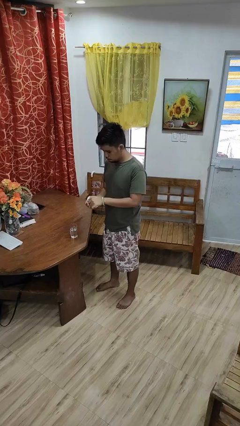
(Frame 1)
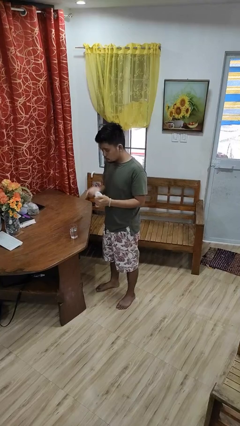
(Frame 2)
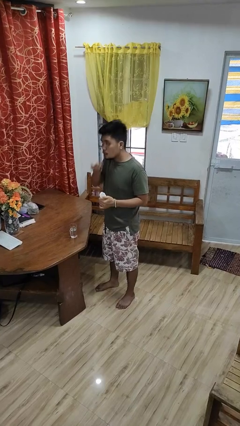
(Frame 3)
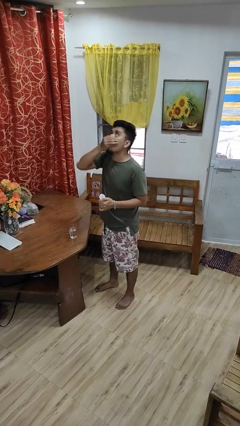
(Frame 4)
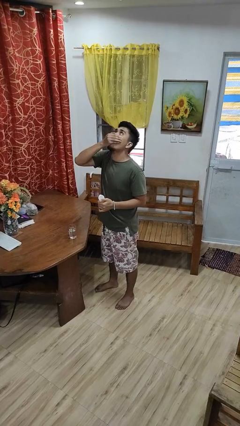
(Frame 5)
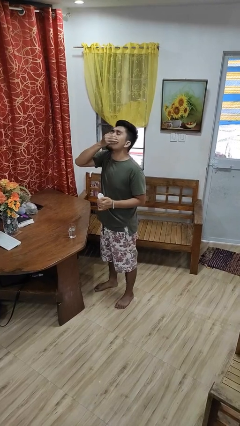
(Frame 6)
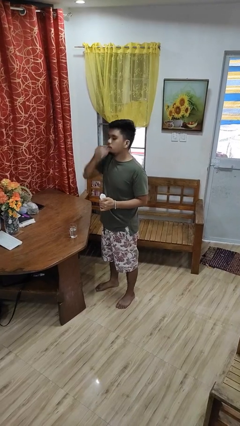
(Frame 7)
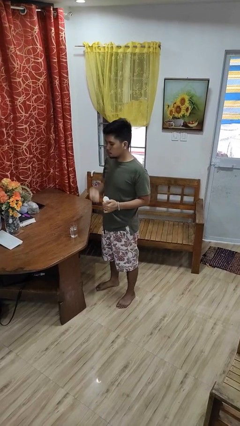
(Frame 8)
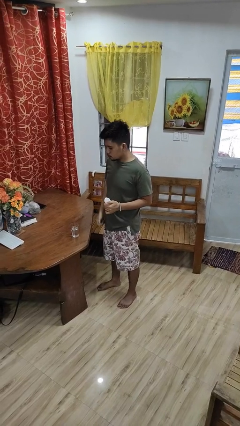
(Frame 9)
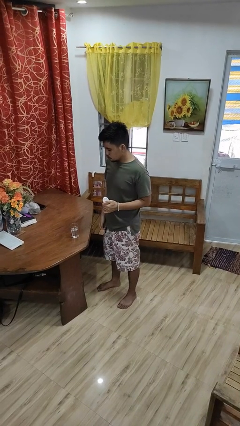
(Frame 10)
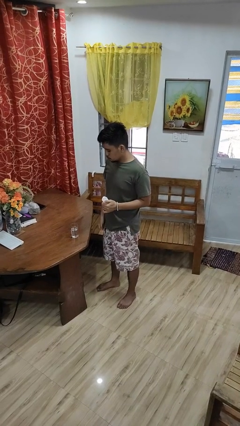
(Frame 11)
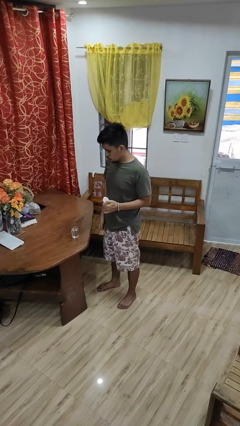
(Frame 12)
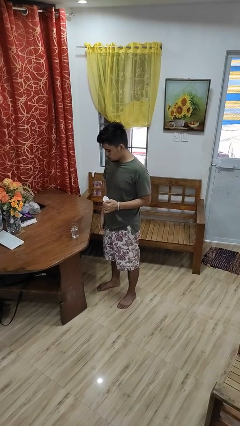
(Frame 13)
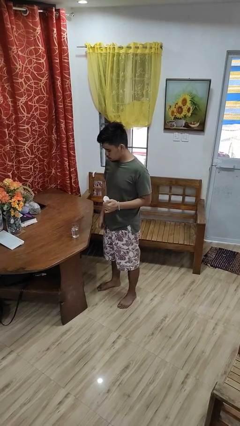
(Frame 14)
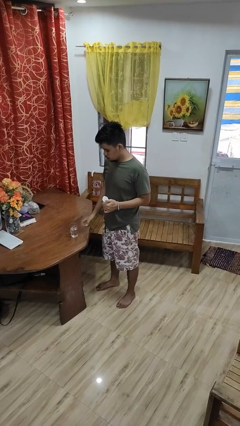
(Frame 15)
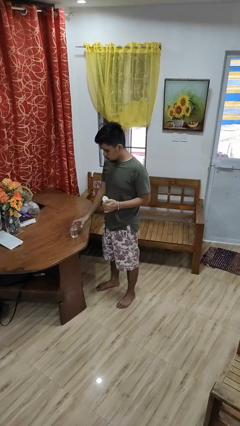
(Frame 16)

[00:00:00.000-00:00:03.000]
person takes medicine pills

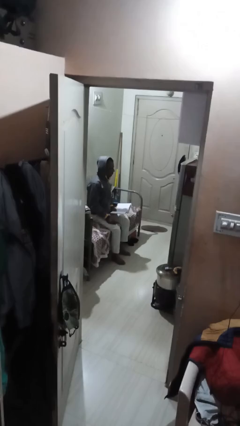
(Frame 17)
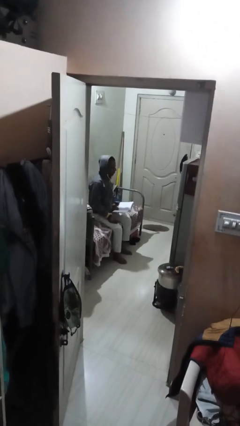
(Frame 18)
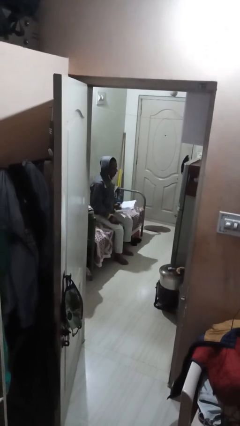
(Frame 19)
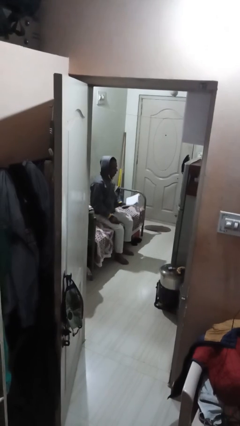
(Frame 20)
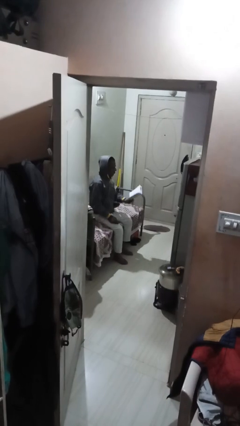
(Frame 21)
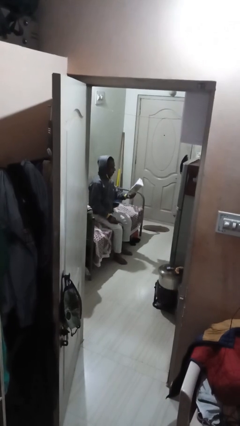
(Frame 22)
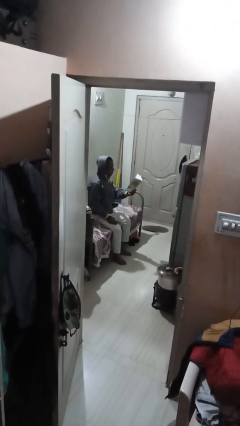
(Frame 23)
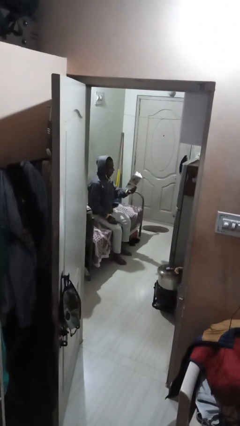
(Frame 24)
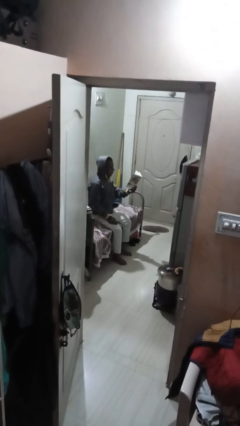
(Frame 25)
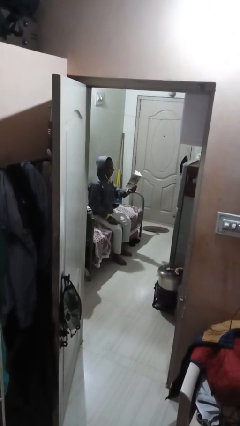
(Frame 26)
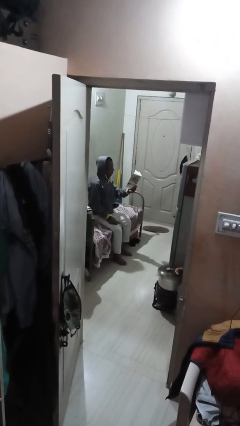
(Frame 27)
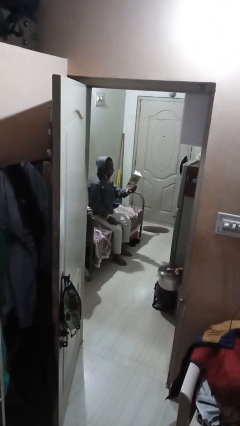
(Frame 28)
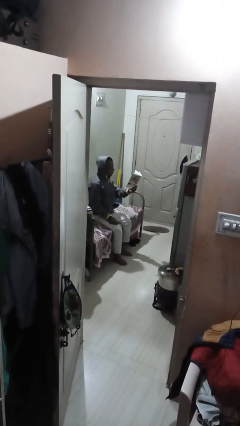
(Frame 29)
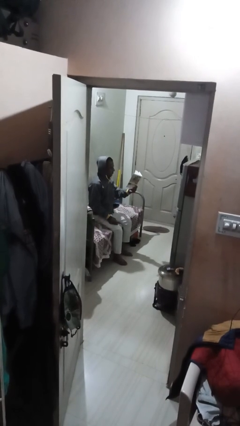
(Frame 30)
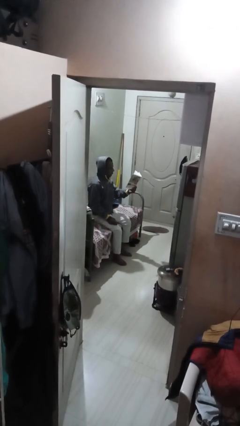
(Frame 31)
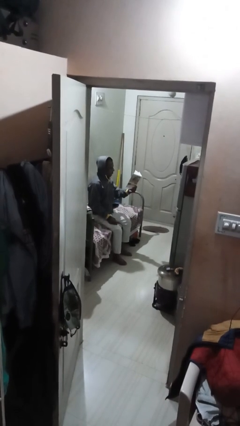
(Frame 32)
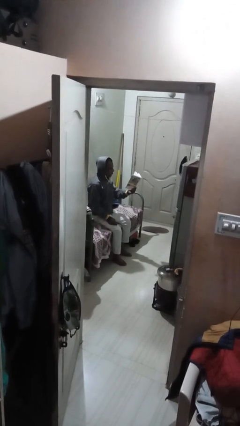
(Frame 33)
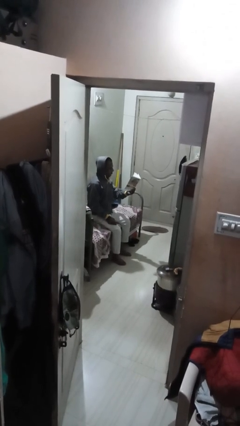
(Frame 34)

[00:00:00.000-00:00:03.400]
person reads document

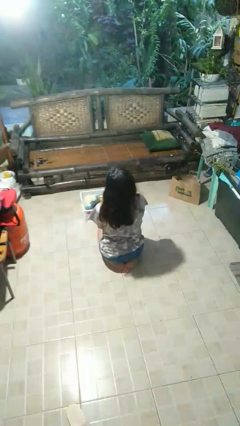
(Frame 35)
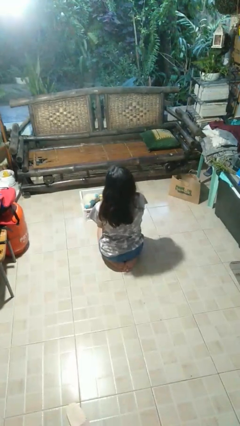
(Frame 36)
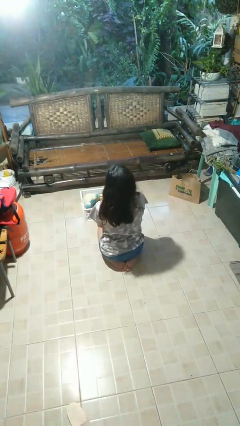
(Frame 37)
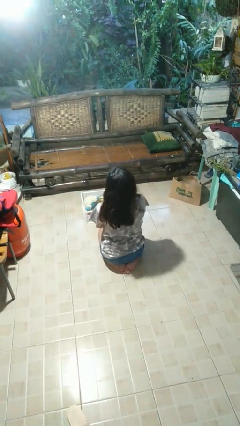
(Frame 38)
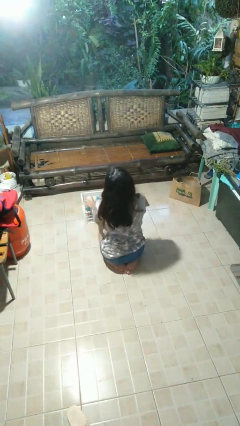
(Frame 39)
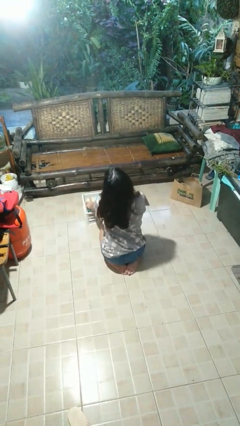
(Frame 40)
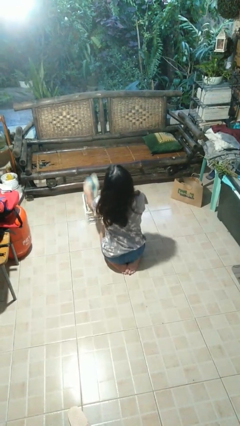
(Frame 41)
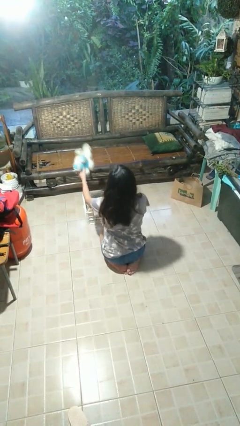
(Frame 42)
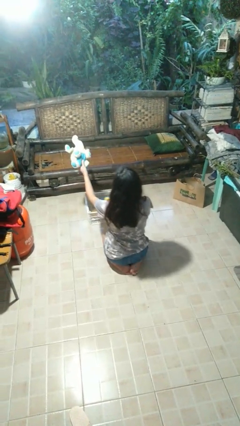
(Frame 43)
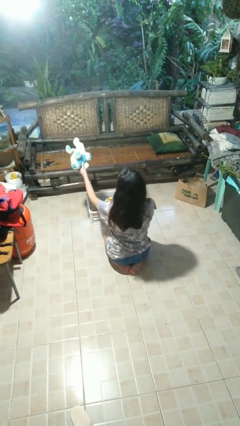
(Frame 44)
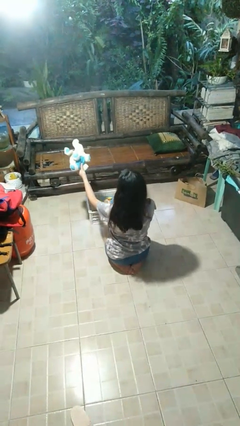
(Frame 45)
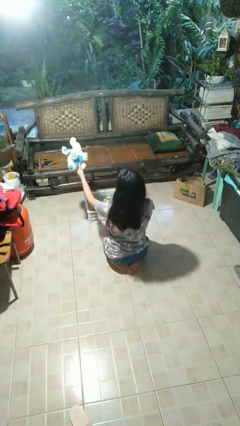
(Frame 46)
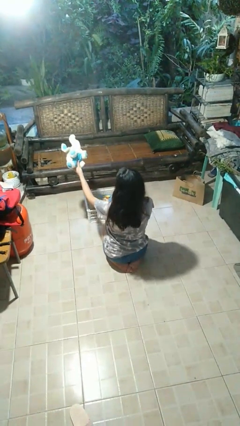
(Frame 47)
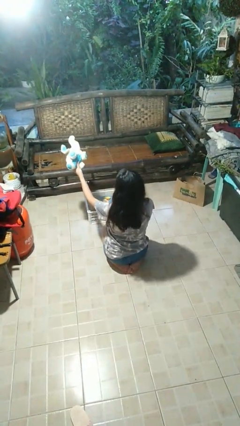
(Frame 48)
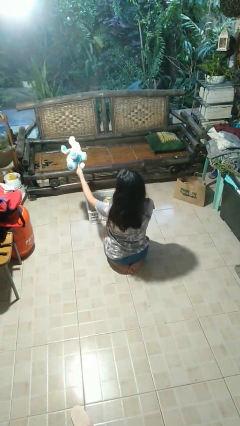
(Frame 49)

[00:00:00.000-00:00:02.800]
person takes object from basket

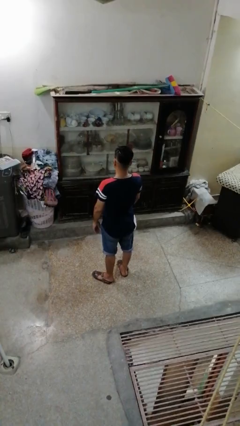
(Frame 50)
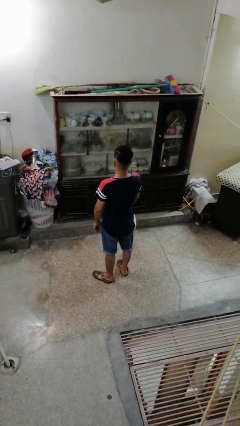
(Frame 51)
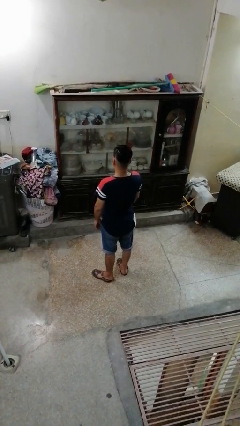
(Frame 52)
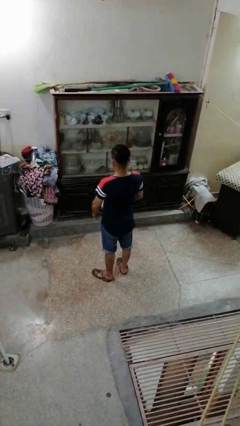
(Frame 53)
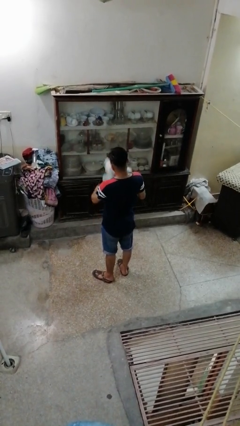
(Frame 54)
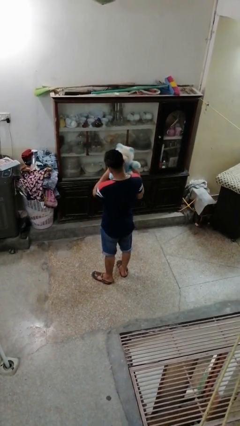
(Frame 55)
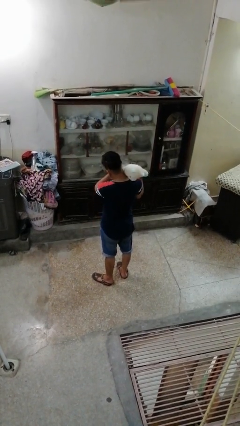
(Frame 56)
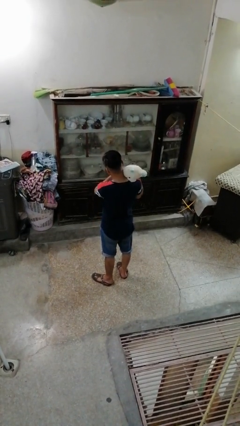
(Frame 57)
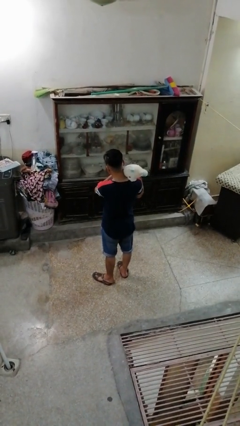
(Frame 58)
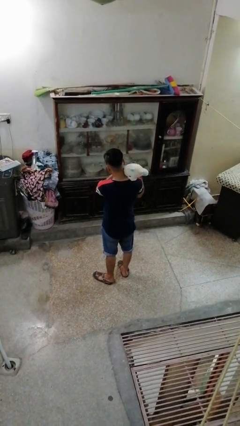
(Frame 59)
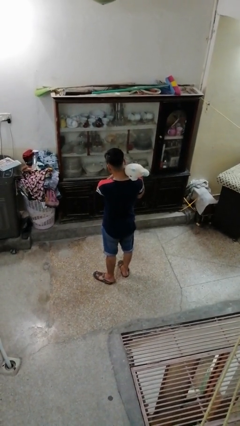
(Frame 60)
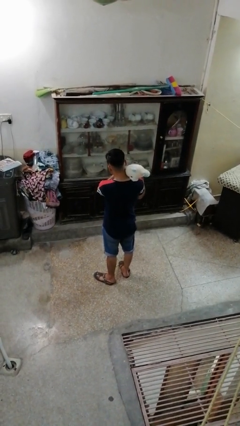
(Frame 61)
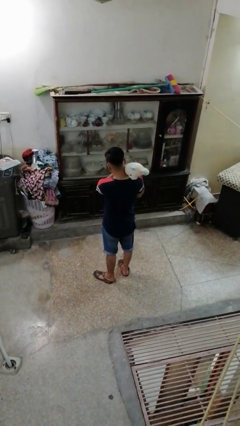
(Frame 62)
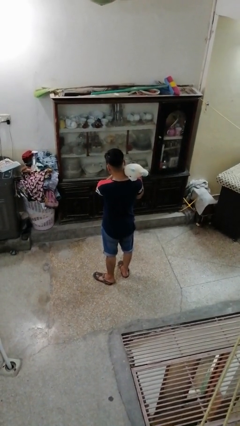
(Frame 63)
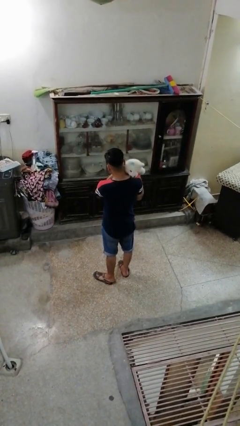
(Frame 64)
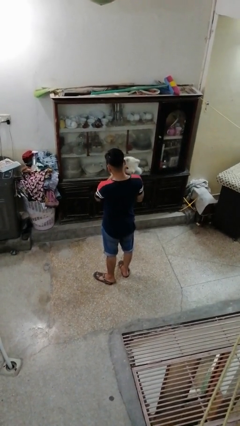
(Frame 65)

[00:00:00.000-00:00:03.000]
person hugs stuffed animal

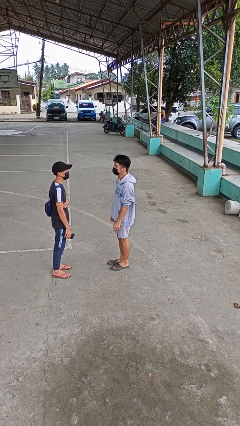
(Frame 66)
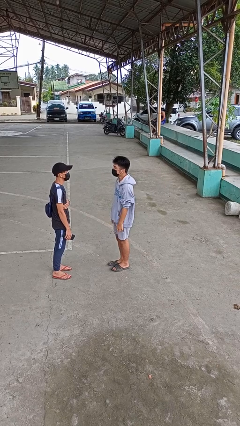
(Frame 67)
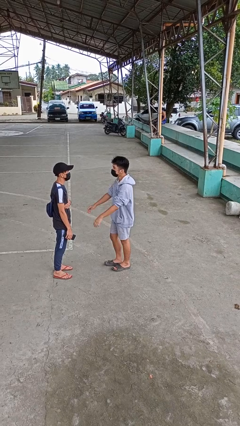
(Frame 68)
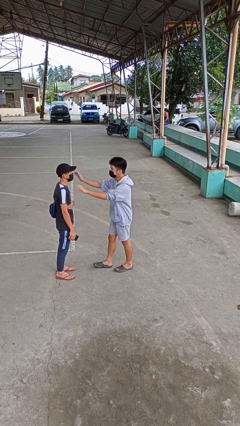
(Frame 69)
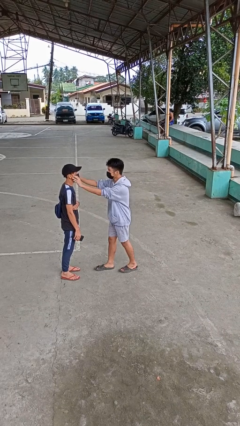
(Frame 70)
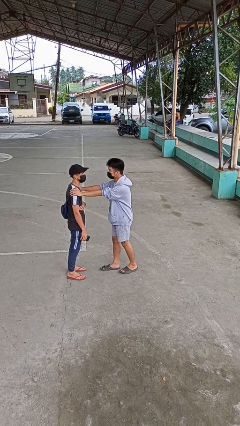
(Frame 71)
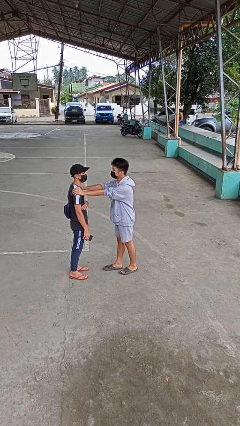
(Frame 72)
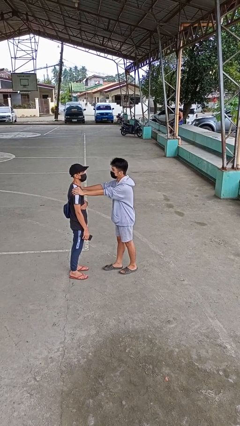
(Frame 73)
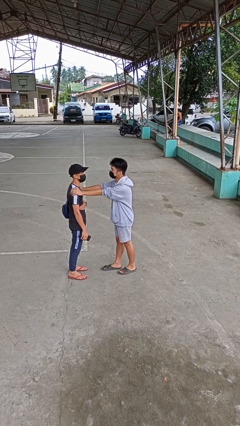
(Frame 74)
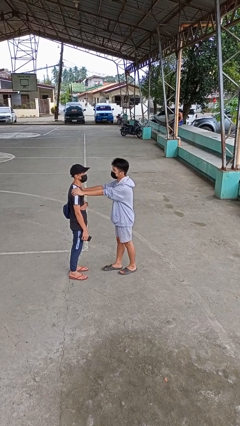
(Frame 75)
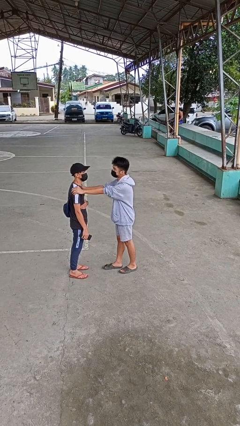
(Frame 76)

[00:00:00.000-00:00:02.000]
person grabs person by shoulder

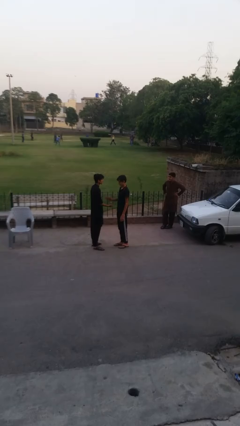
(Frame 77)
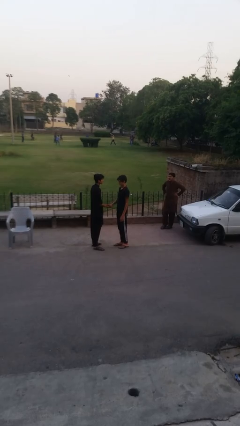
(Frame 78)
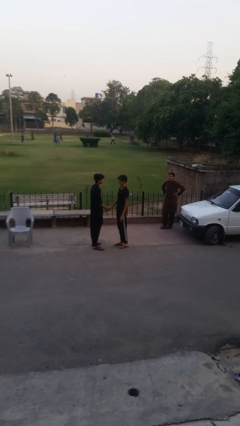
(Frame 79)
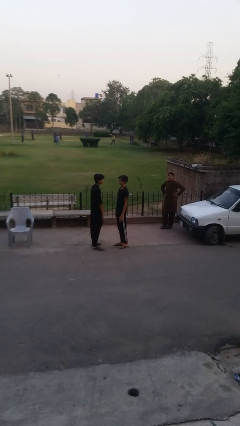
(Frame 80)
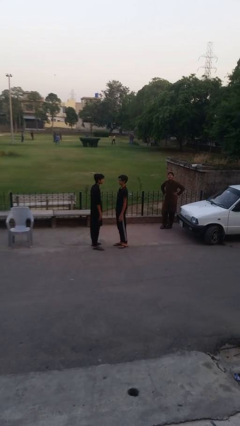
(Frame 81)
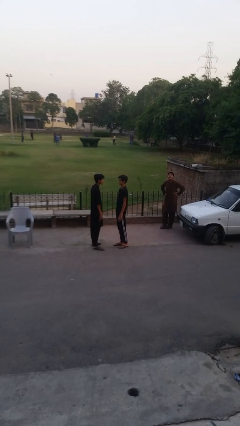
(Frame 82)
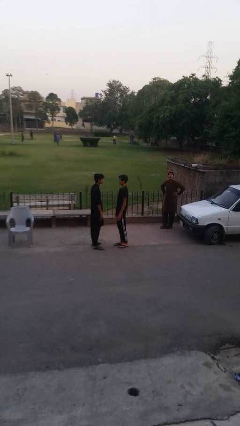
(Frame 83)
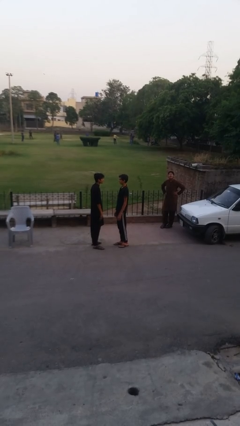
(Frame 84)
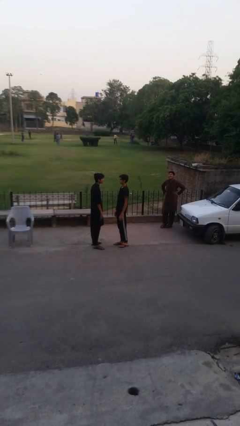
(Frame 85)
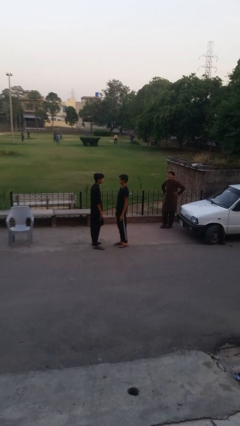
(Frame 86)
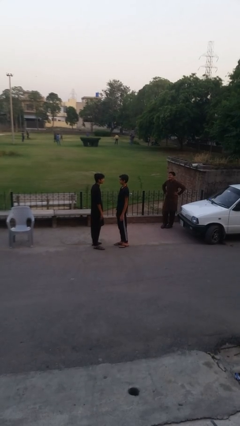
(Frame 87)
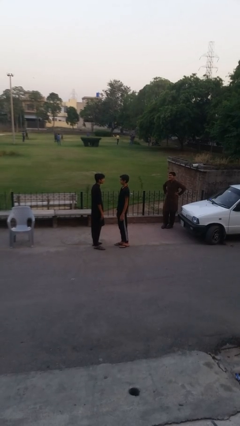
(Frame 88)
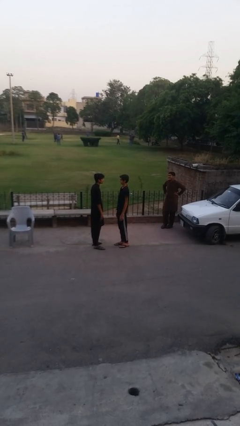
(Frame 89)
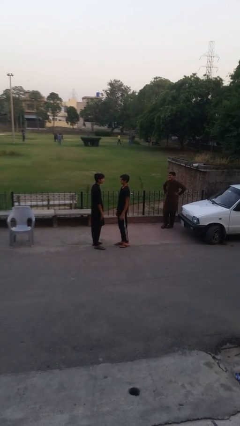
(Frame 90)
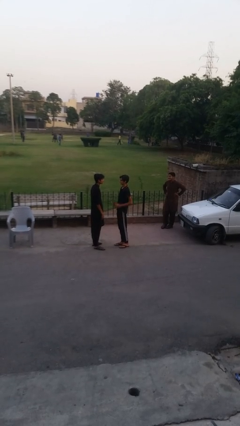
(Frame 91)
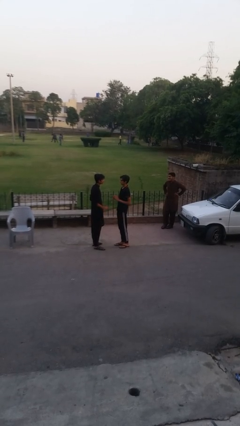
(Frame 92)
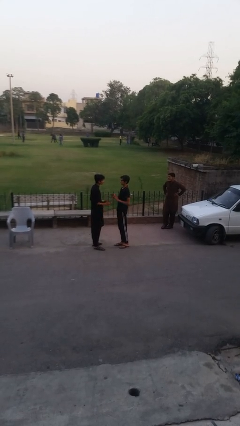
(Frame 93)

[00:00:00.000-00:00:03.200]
person highfives hand
